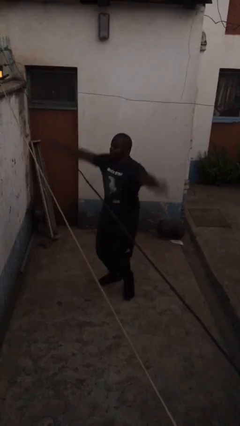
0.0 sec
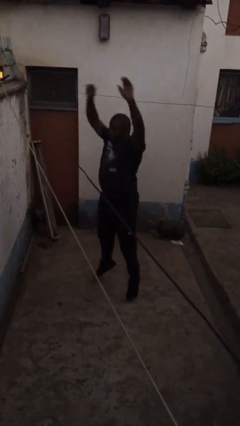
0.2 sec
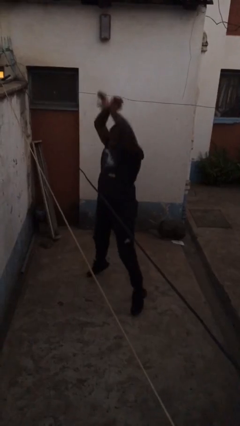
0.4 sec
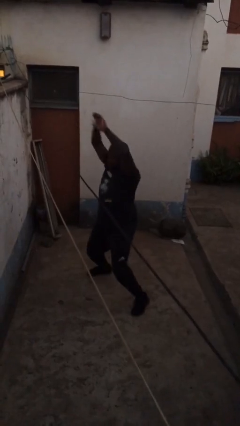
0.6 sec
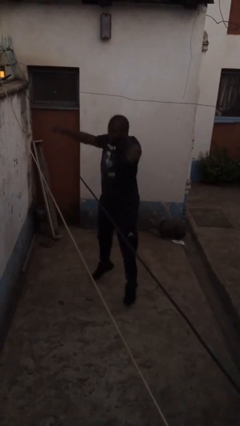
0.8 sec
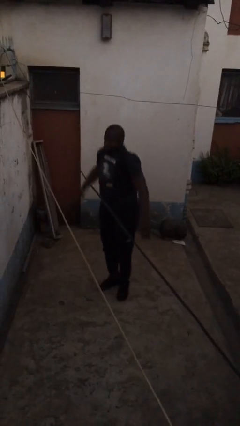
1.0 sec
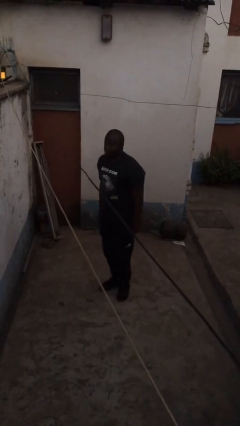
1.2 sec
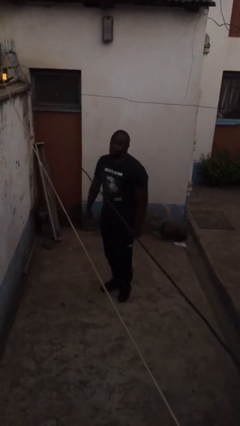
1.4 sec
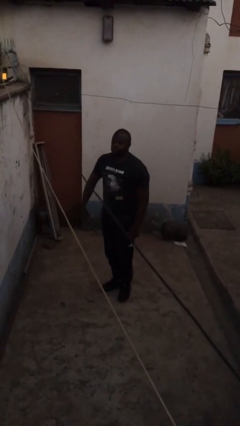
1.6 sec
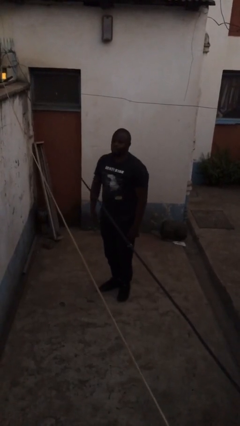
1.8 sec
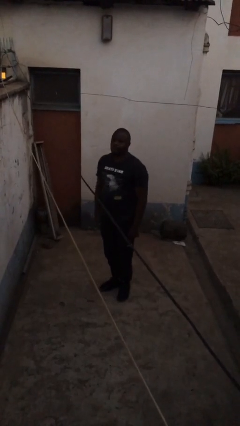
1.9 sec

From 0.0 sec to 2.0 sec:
person exercises with jumping jacks

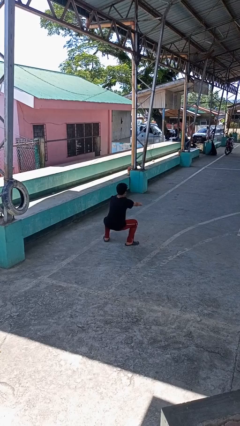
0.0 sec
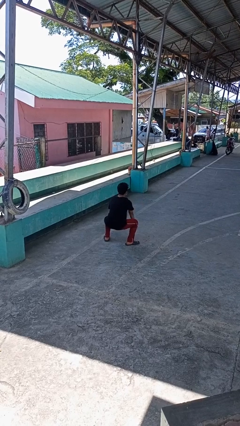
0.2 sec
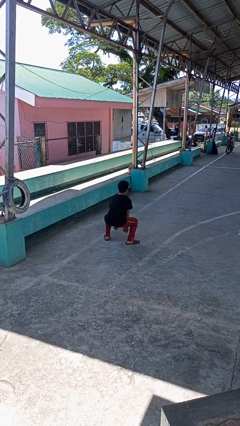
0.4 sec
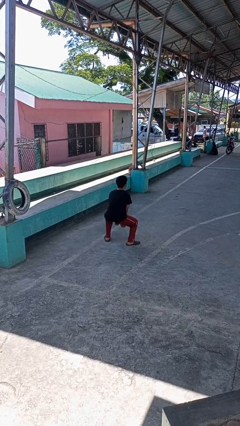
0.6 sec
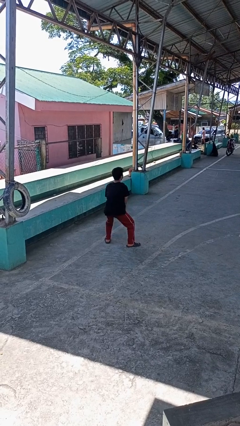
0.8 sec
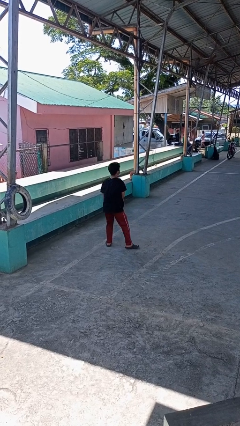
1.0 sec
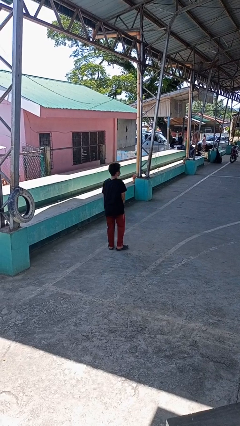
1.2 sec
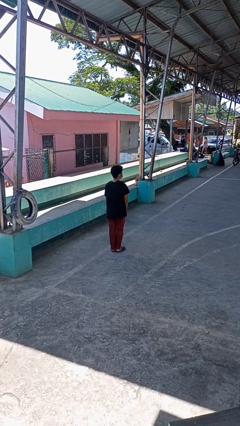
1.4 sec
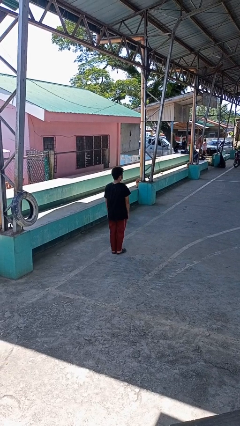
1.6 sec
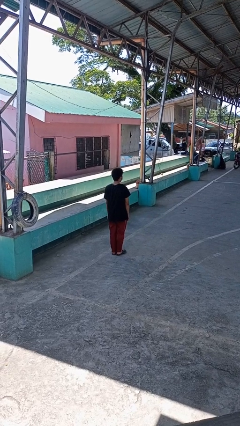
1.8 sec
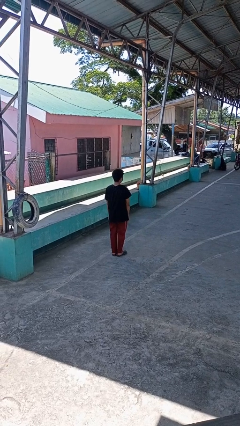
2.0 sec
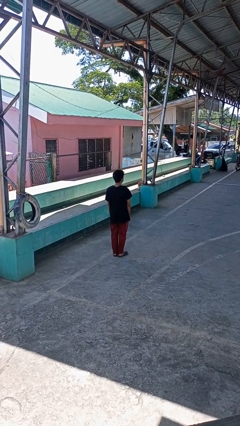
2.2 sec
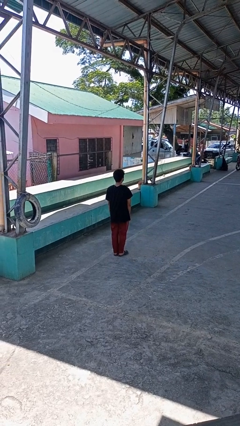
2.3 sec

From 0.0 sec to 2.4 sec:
person stands up

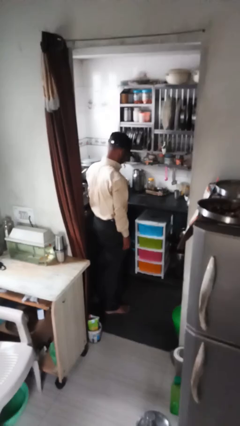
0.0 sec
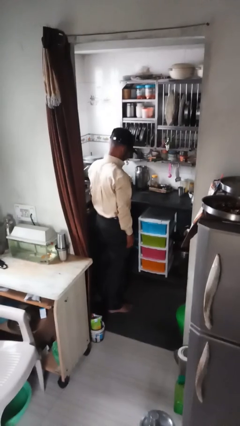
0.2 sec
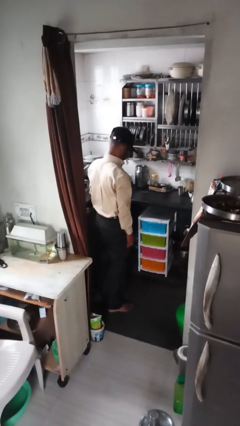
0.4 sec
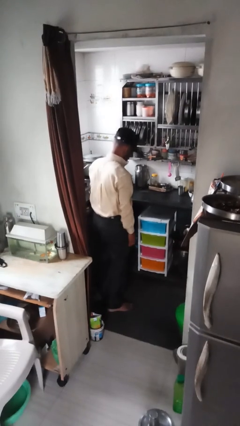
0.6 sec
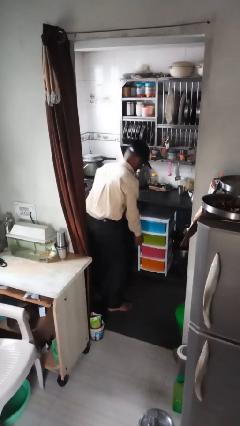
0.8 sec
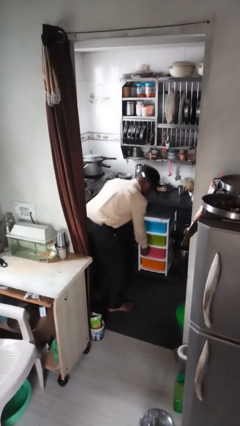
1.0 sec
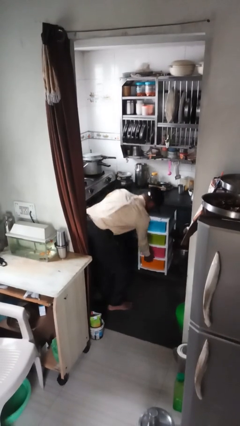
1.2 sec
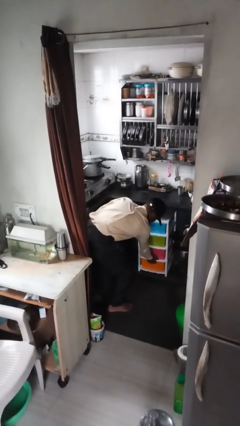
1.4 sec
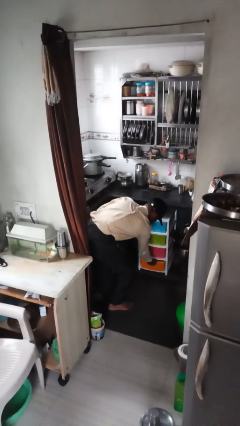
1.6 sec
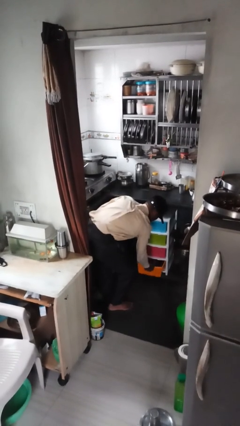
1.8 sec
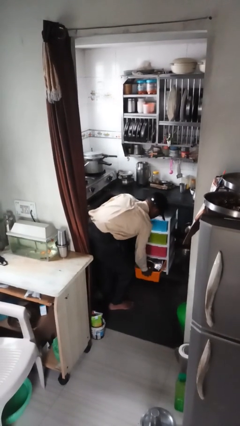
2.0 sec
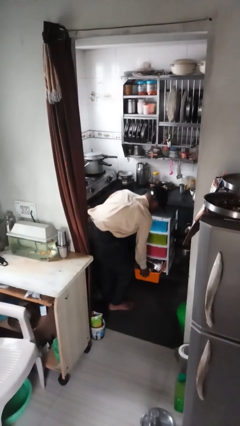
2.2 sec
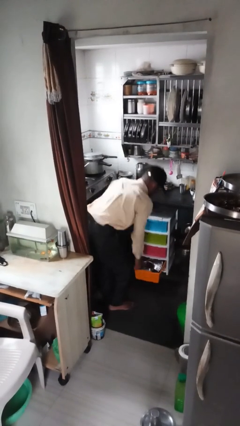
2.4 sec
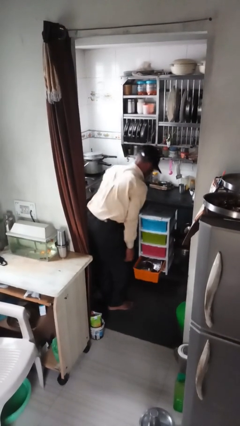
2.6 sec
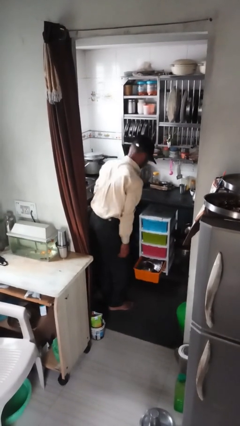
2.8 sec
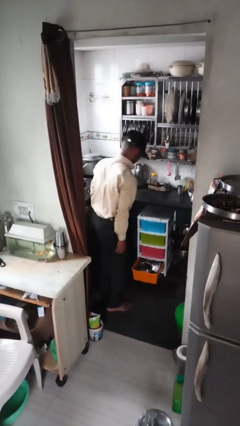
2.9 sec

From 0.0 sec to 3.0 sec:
person opens kitchen drawer

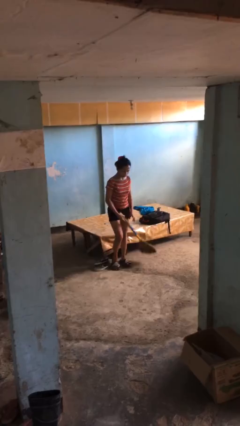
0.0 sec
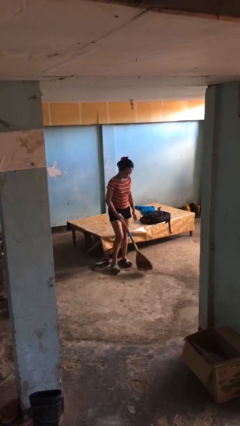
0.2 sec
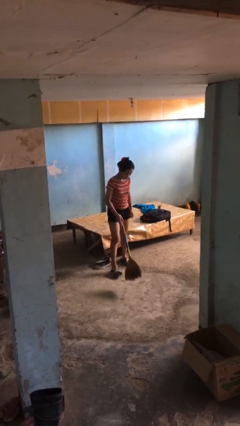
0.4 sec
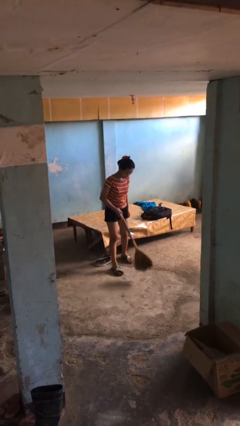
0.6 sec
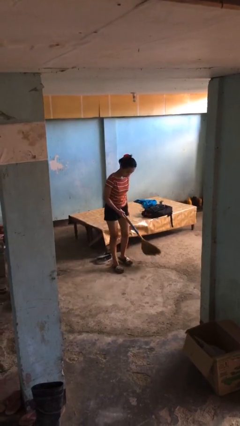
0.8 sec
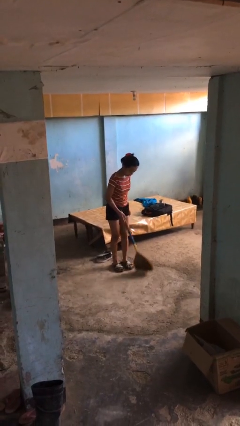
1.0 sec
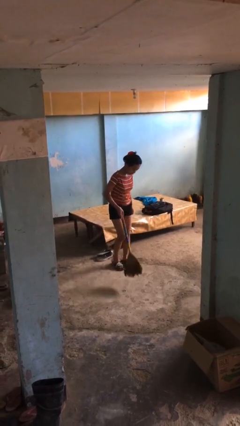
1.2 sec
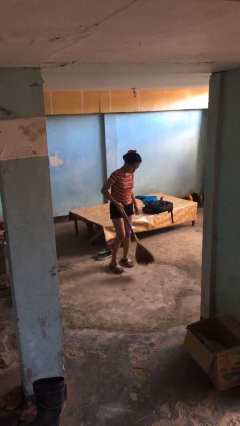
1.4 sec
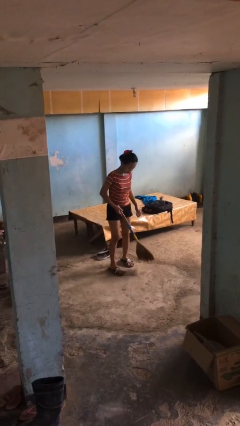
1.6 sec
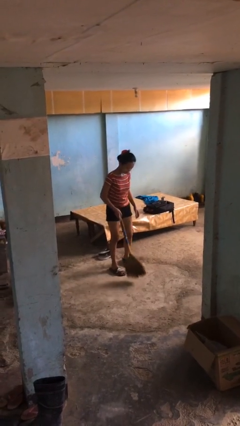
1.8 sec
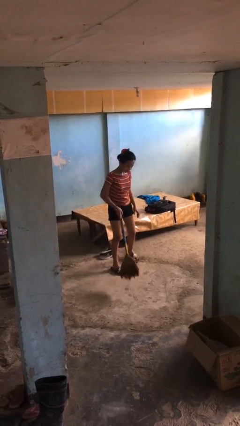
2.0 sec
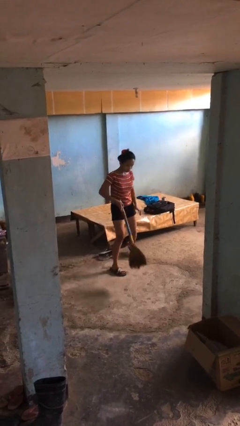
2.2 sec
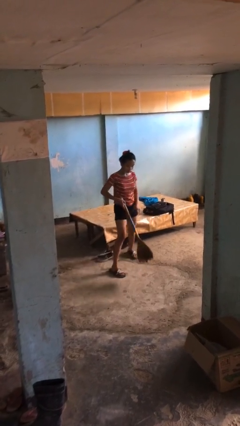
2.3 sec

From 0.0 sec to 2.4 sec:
person sweeps floor

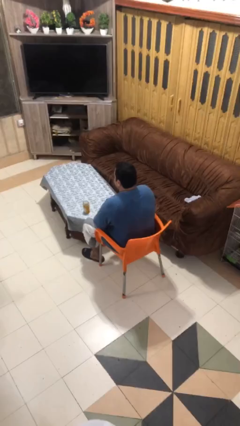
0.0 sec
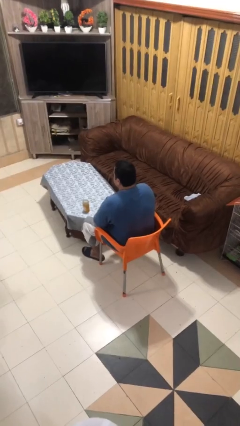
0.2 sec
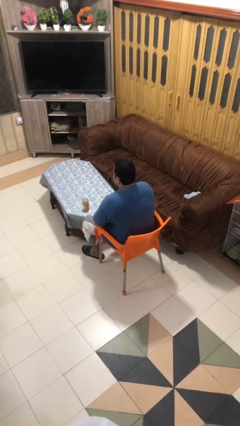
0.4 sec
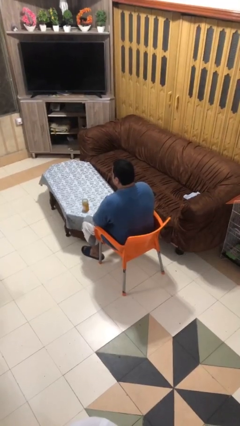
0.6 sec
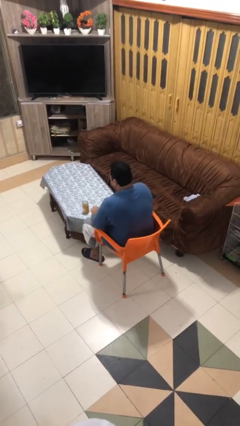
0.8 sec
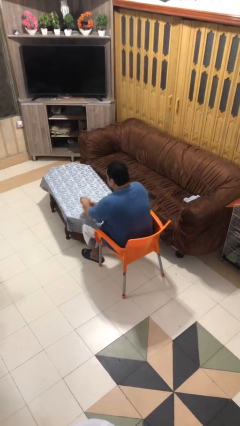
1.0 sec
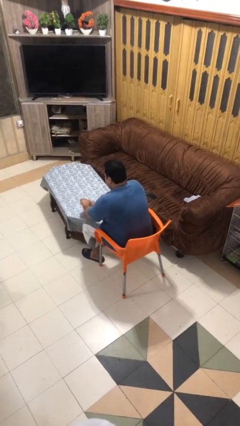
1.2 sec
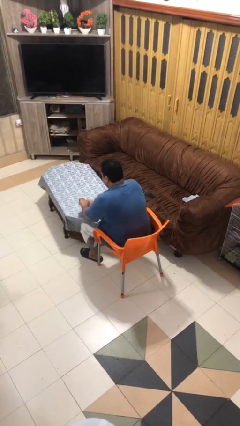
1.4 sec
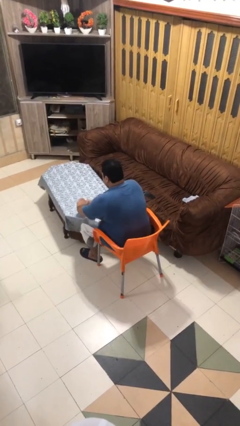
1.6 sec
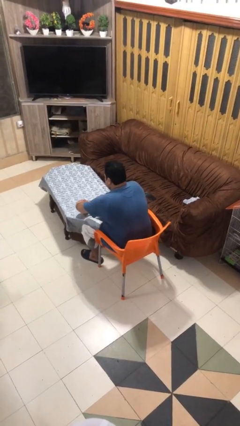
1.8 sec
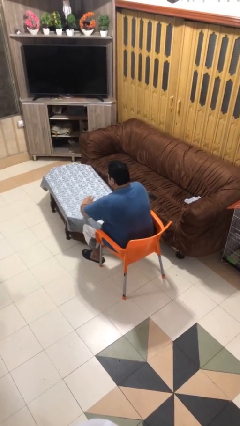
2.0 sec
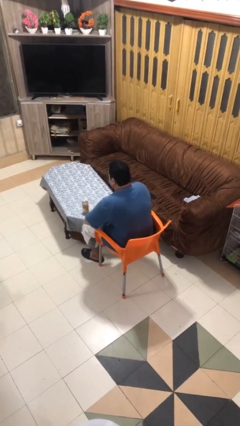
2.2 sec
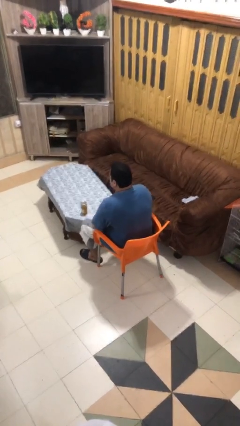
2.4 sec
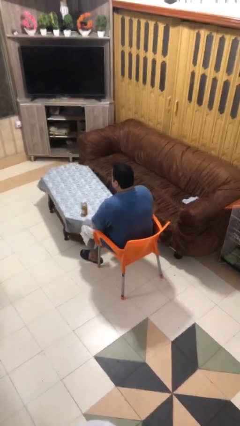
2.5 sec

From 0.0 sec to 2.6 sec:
person closes jar

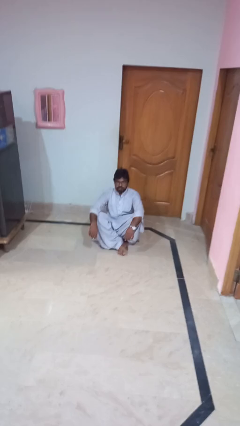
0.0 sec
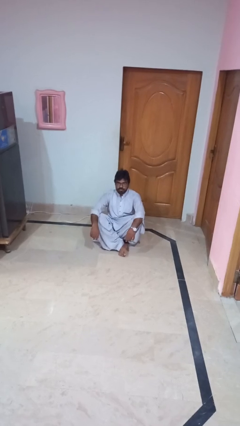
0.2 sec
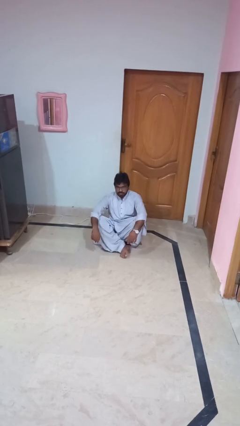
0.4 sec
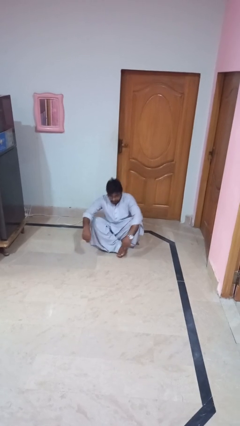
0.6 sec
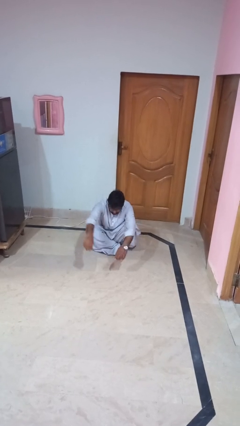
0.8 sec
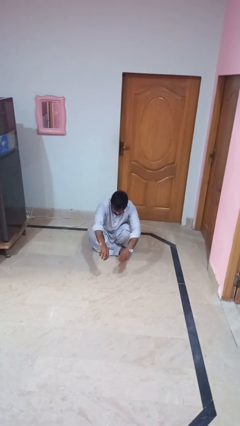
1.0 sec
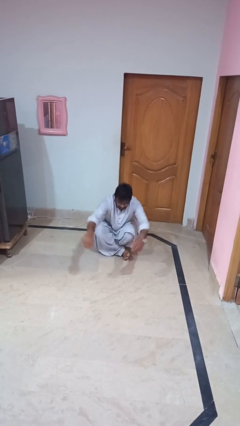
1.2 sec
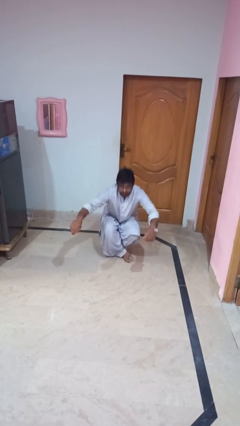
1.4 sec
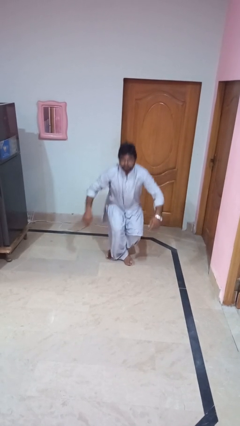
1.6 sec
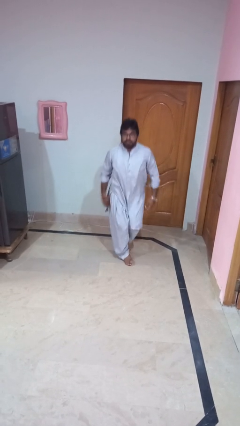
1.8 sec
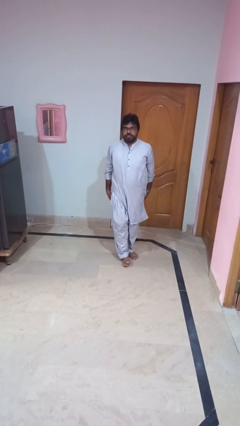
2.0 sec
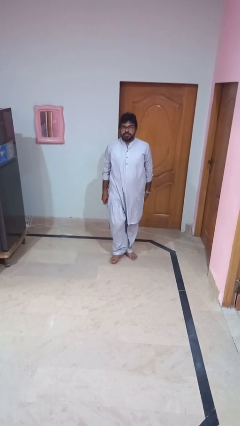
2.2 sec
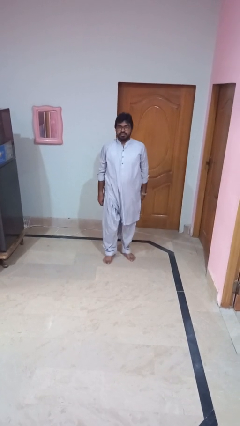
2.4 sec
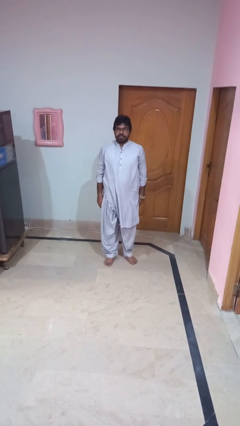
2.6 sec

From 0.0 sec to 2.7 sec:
person stands up from floor

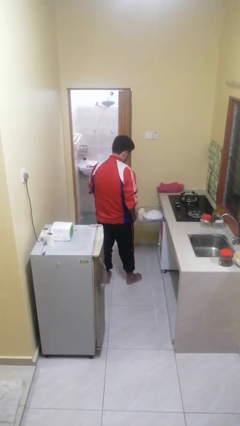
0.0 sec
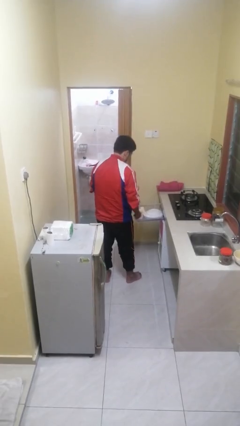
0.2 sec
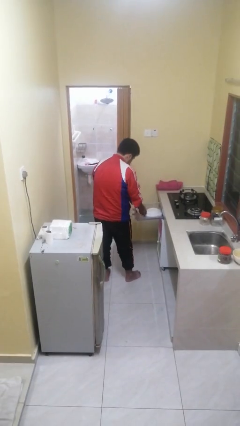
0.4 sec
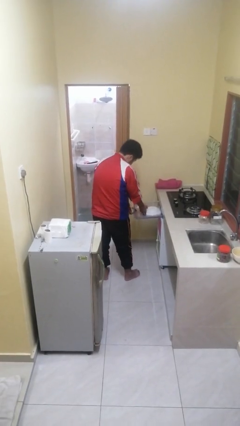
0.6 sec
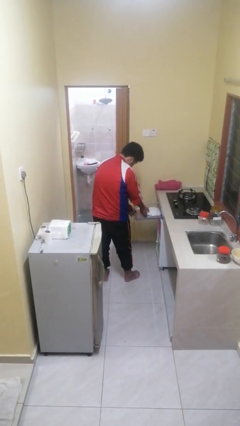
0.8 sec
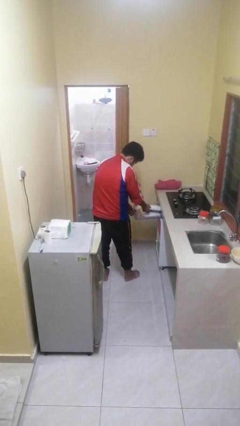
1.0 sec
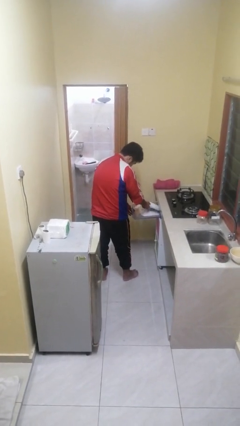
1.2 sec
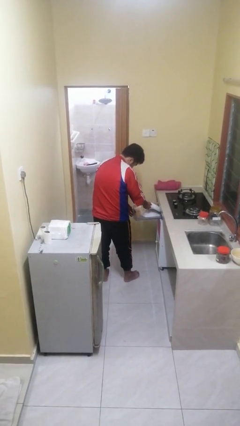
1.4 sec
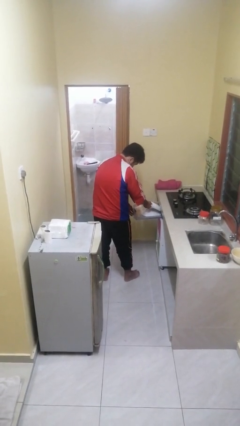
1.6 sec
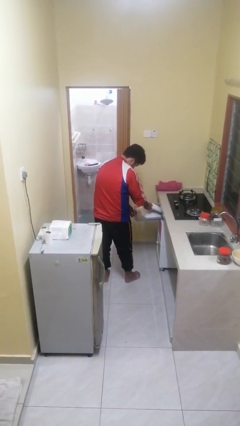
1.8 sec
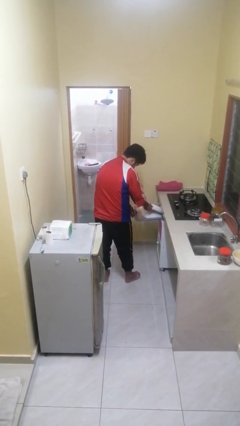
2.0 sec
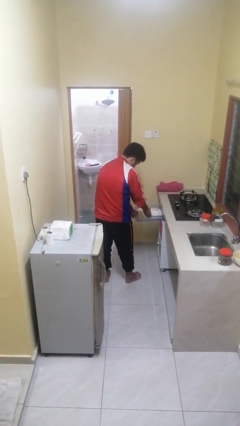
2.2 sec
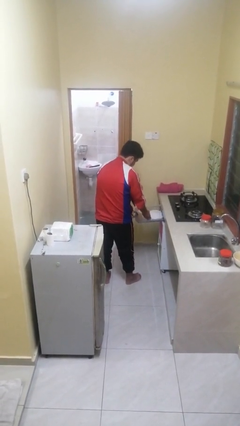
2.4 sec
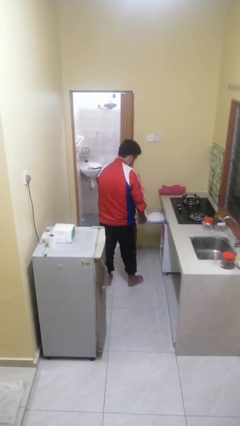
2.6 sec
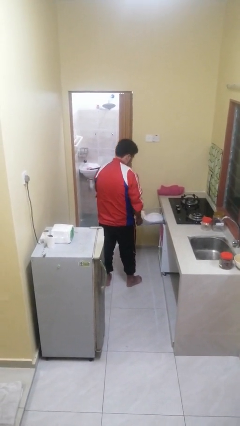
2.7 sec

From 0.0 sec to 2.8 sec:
person searches in kitchen drawer
